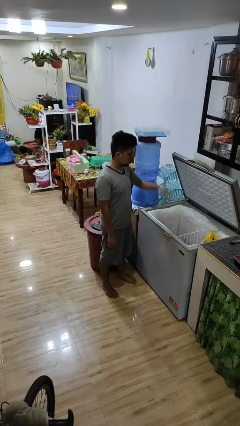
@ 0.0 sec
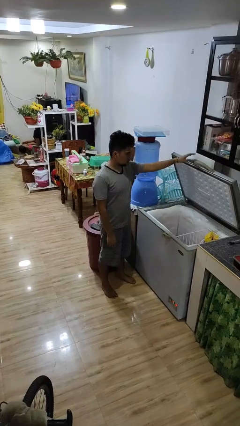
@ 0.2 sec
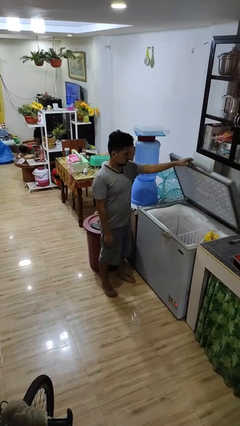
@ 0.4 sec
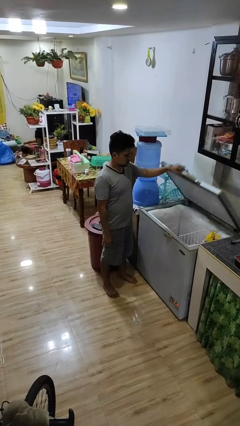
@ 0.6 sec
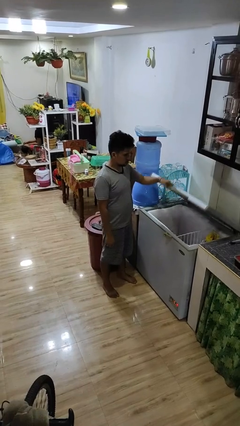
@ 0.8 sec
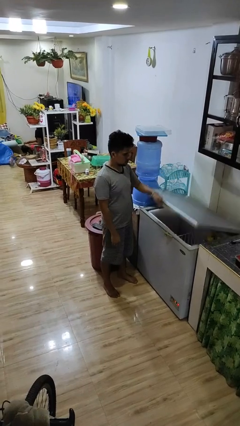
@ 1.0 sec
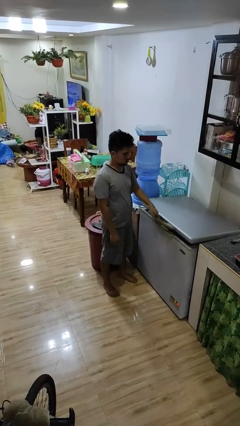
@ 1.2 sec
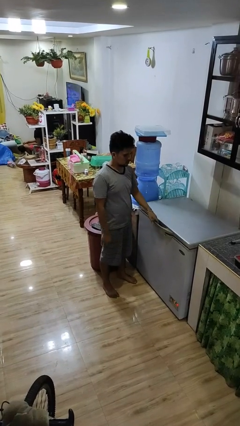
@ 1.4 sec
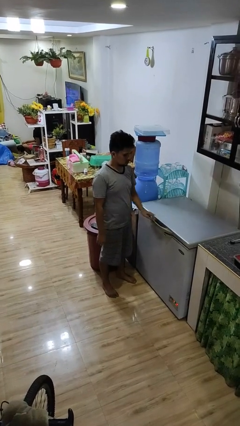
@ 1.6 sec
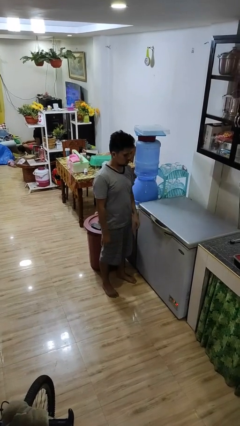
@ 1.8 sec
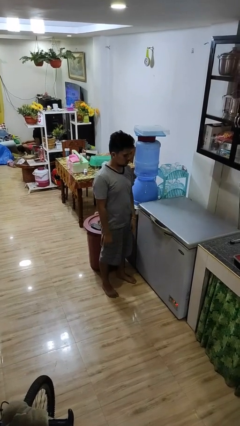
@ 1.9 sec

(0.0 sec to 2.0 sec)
person closes refrigerator

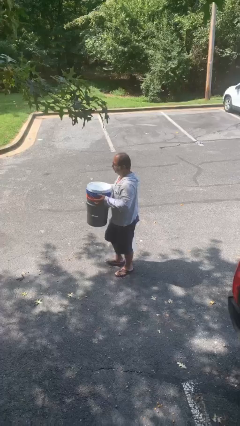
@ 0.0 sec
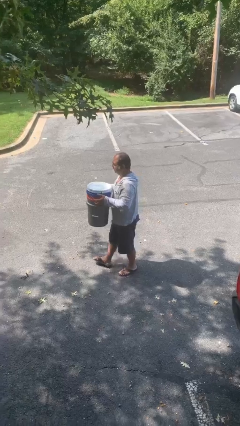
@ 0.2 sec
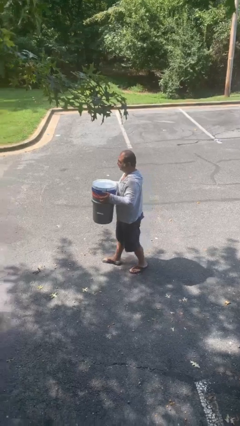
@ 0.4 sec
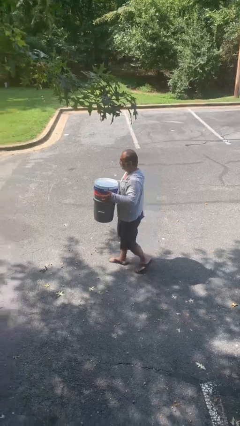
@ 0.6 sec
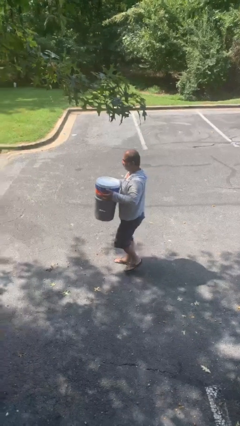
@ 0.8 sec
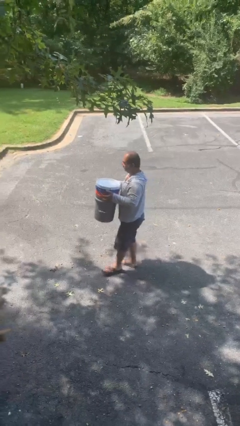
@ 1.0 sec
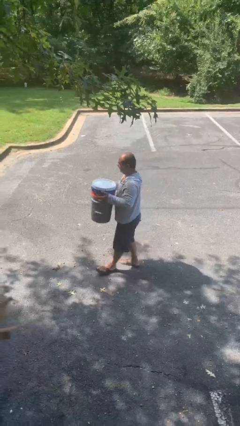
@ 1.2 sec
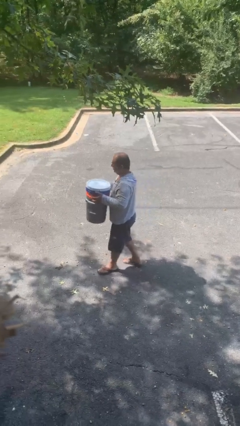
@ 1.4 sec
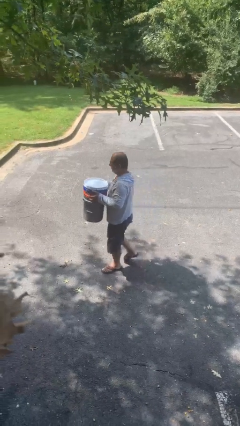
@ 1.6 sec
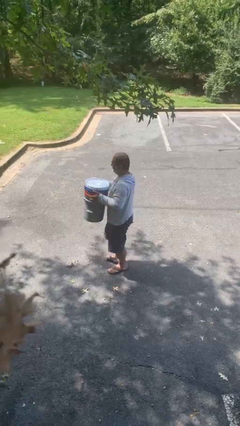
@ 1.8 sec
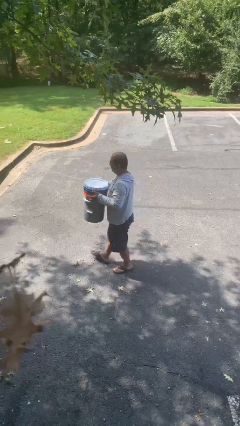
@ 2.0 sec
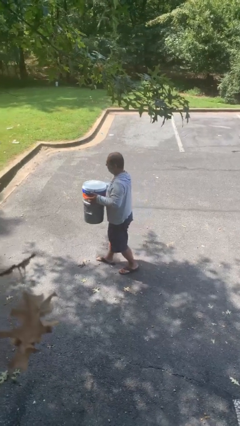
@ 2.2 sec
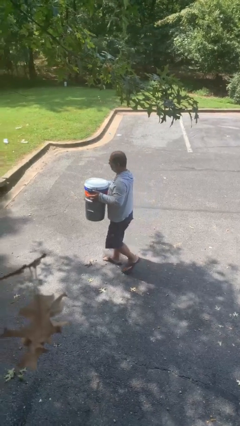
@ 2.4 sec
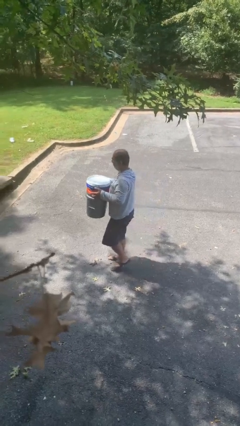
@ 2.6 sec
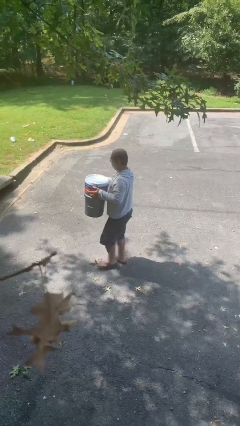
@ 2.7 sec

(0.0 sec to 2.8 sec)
person carries heavy object

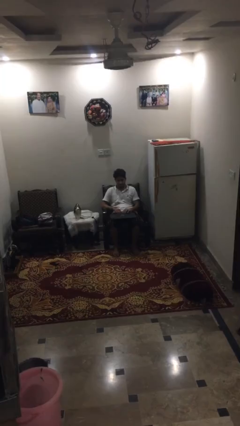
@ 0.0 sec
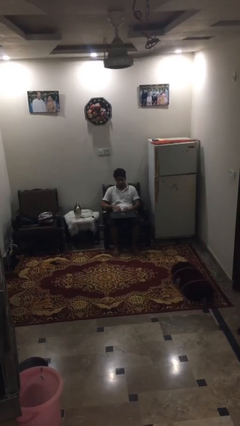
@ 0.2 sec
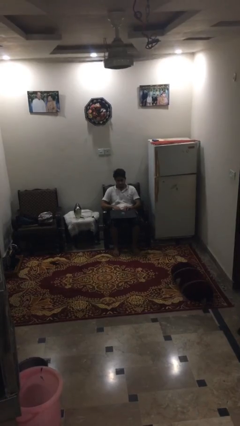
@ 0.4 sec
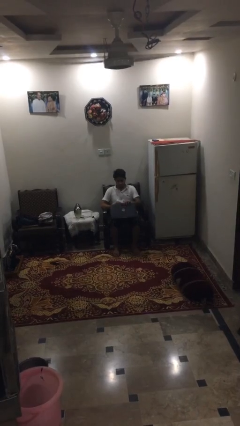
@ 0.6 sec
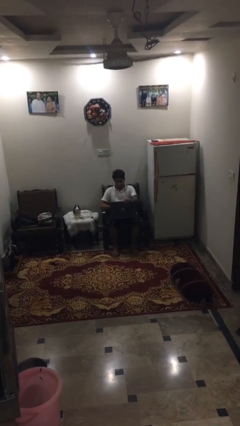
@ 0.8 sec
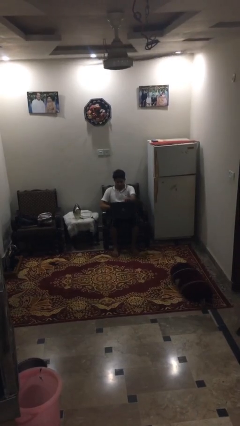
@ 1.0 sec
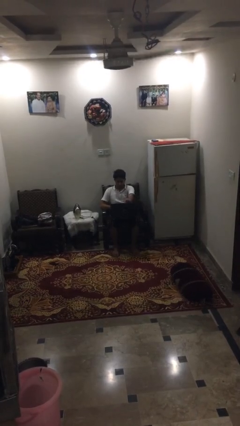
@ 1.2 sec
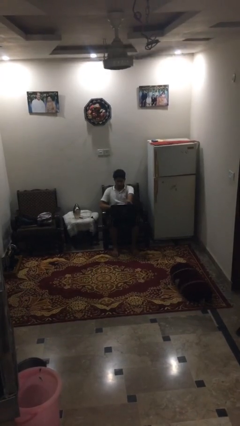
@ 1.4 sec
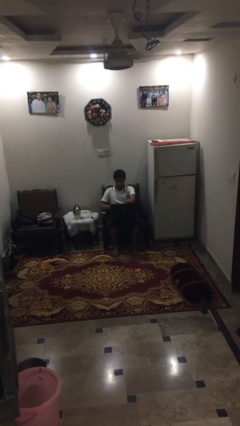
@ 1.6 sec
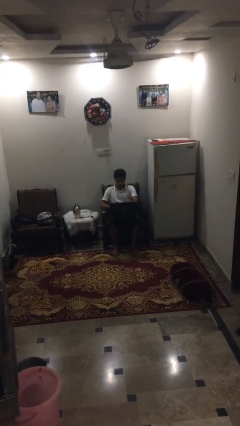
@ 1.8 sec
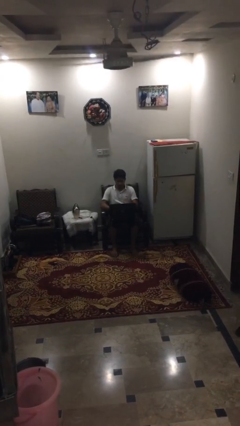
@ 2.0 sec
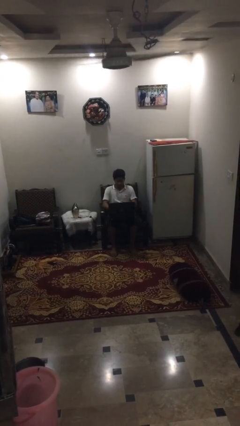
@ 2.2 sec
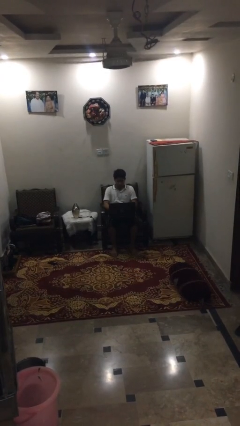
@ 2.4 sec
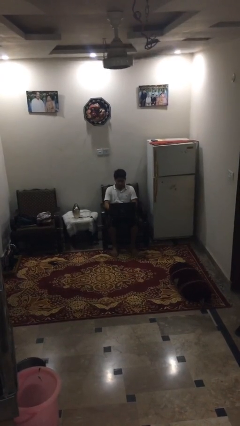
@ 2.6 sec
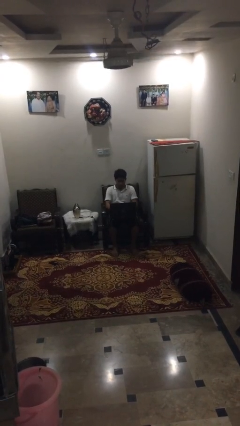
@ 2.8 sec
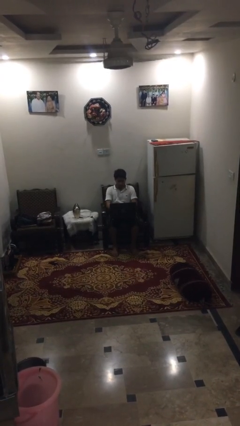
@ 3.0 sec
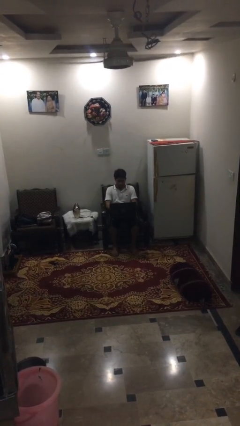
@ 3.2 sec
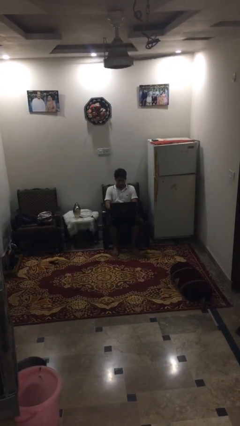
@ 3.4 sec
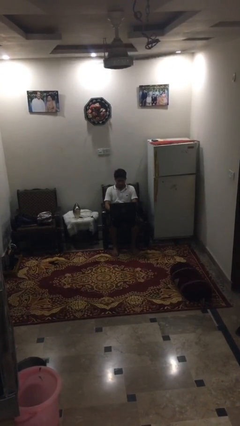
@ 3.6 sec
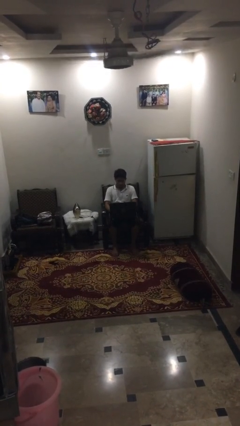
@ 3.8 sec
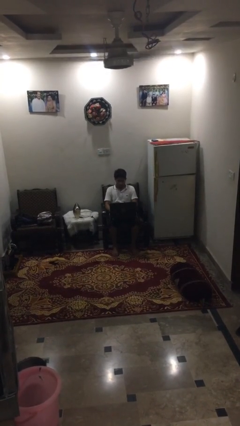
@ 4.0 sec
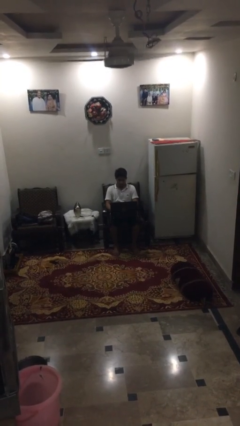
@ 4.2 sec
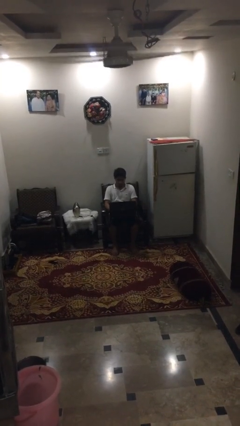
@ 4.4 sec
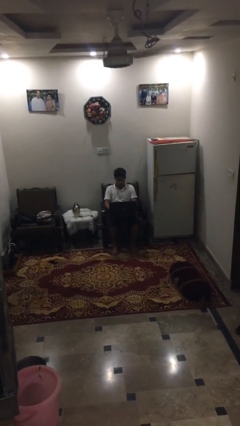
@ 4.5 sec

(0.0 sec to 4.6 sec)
person opens laptop

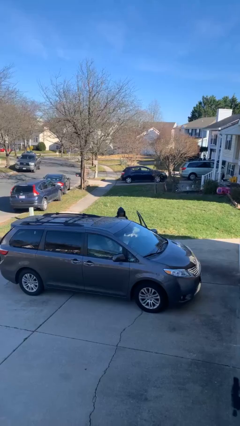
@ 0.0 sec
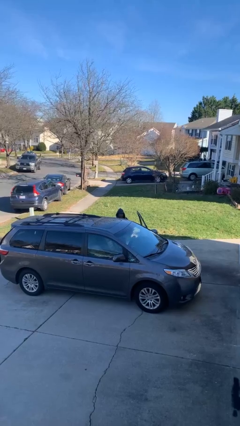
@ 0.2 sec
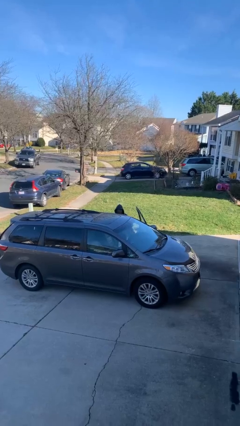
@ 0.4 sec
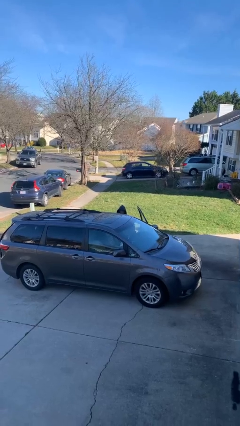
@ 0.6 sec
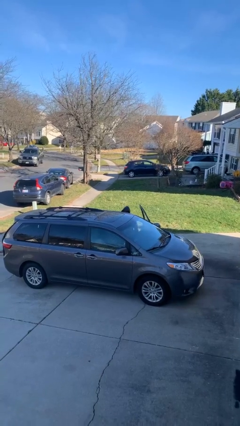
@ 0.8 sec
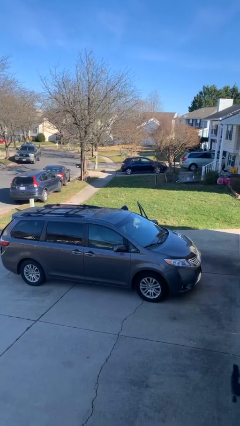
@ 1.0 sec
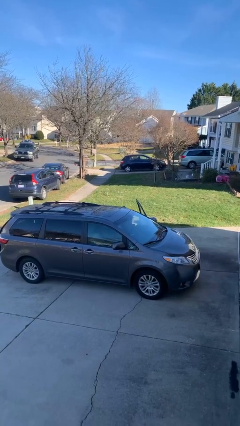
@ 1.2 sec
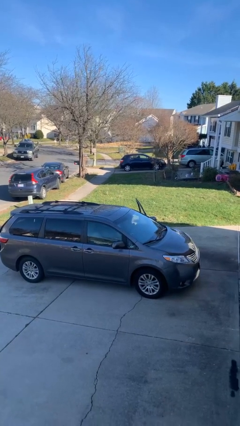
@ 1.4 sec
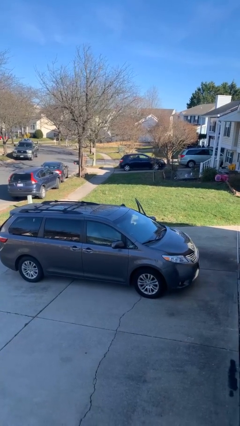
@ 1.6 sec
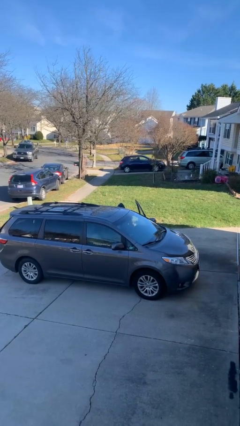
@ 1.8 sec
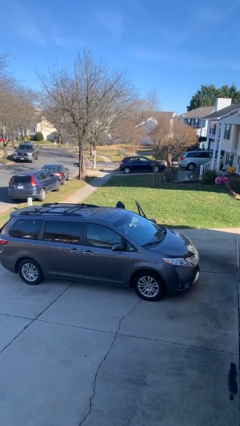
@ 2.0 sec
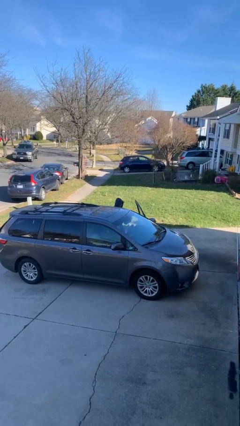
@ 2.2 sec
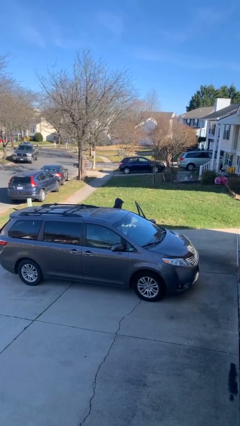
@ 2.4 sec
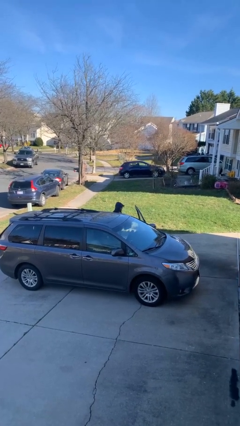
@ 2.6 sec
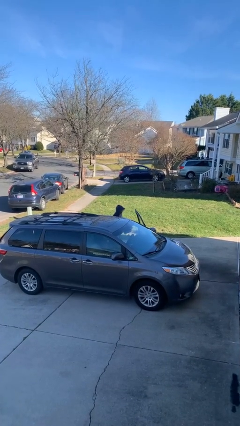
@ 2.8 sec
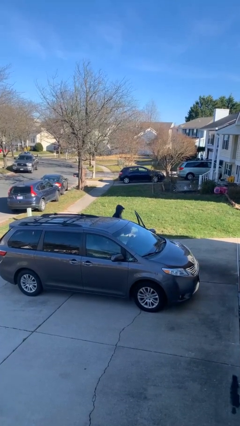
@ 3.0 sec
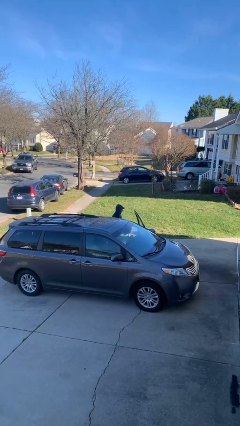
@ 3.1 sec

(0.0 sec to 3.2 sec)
person loads car

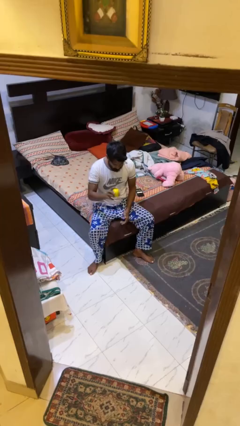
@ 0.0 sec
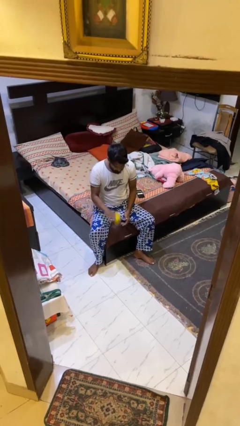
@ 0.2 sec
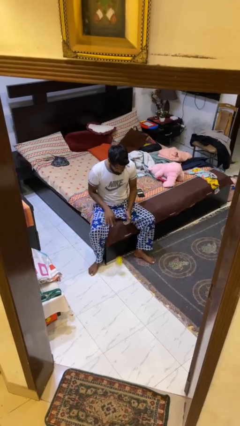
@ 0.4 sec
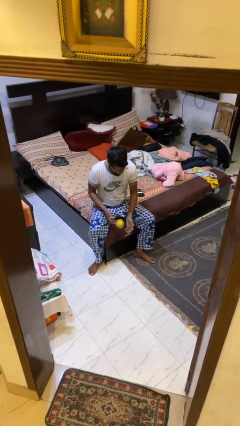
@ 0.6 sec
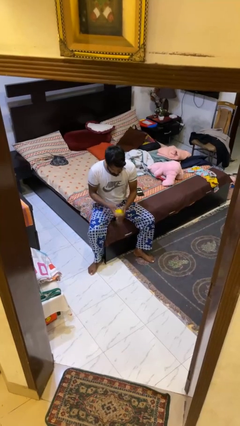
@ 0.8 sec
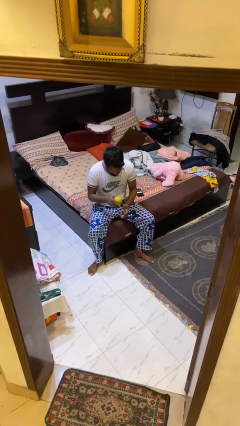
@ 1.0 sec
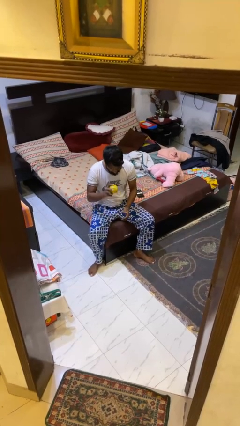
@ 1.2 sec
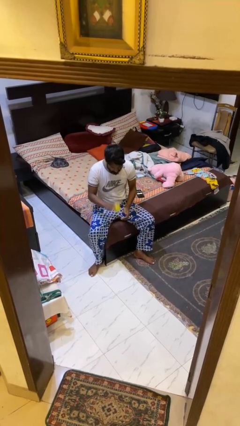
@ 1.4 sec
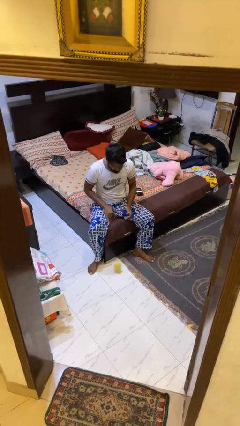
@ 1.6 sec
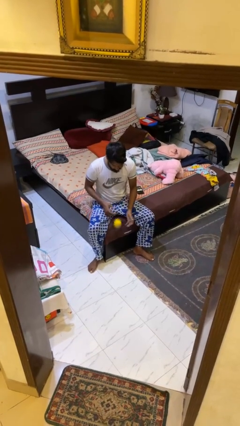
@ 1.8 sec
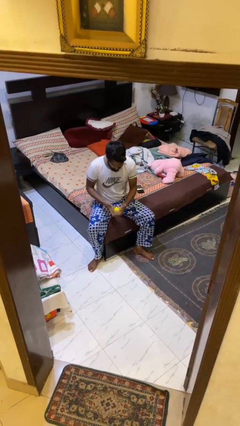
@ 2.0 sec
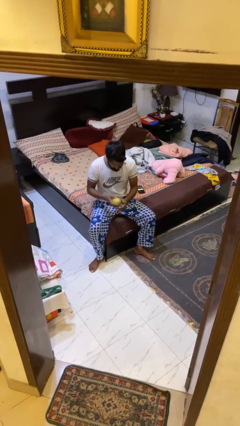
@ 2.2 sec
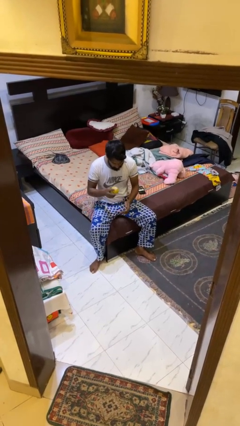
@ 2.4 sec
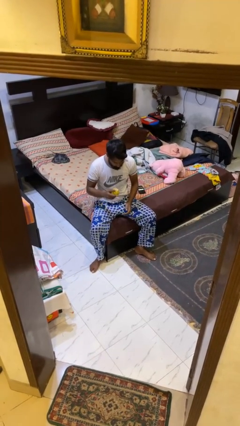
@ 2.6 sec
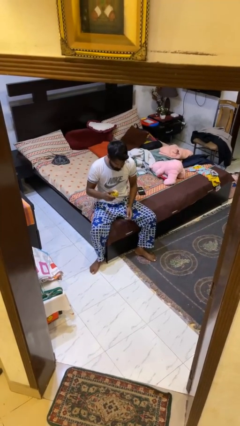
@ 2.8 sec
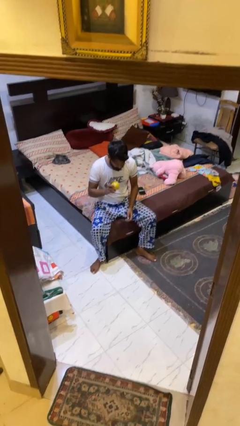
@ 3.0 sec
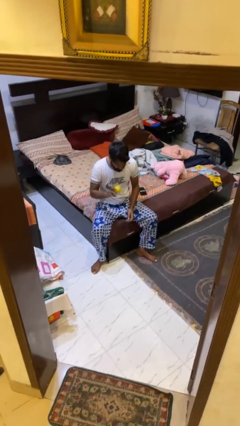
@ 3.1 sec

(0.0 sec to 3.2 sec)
person bounces ball on floor

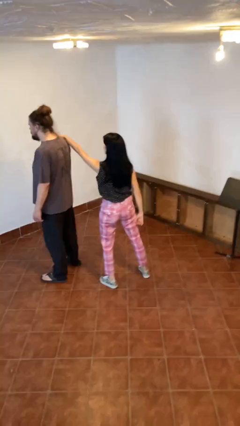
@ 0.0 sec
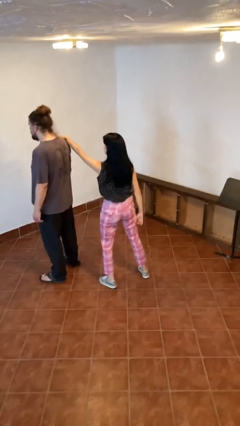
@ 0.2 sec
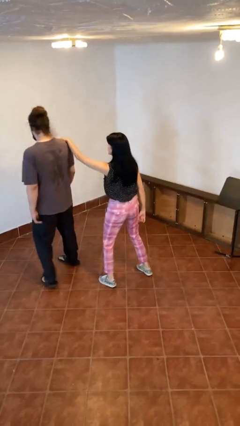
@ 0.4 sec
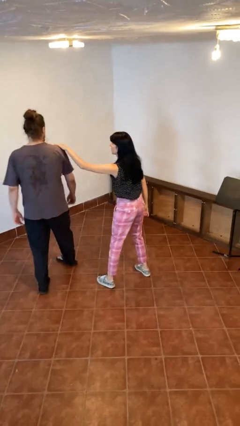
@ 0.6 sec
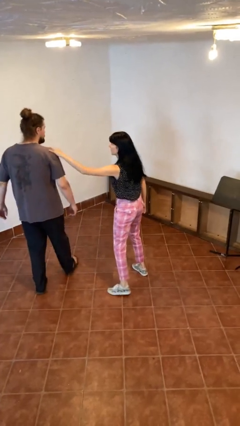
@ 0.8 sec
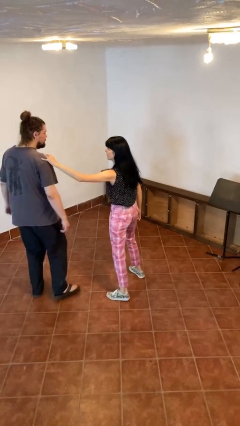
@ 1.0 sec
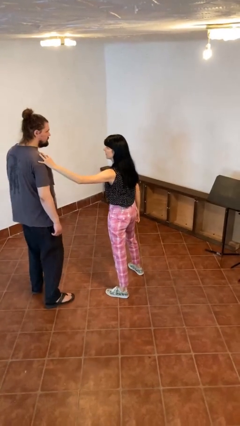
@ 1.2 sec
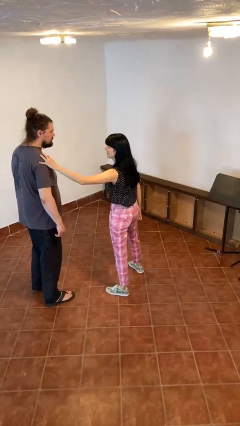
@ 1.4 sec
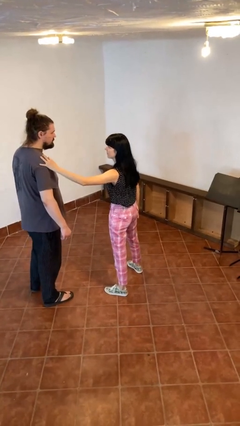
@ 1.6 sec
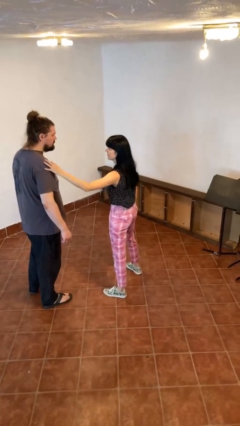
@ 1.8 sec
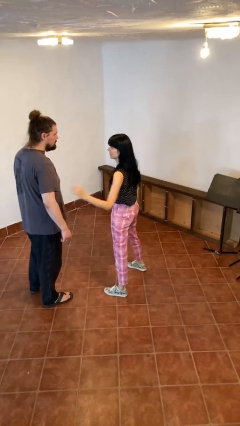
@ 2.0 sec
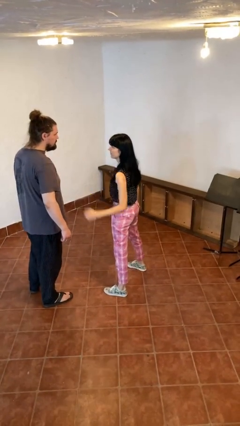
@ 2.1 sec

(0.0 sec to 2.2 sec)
person spins person around
